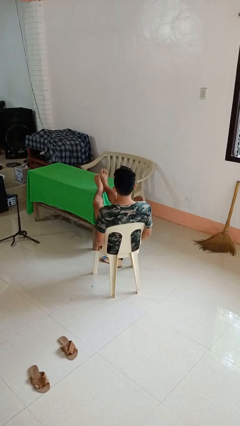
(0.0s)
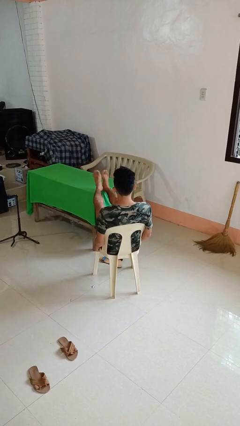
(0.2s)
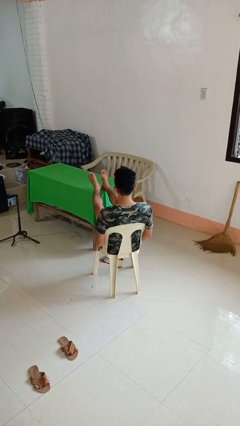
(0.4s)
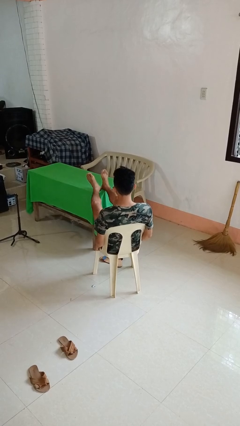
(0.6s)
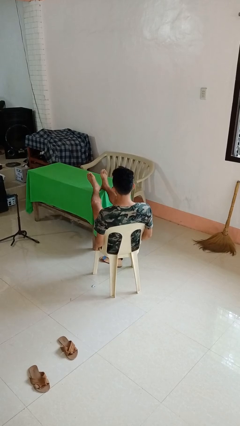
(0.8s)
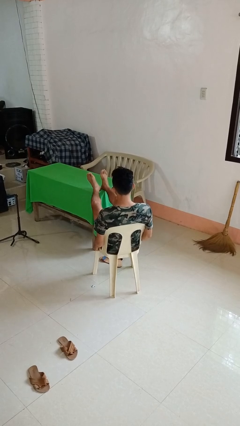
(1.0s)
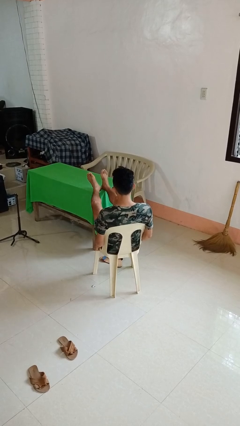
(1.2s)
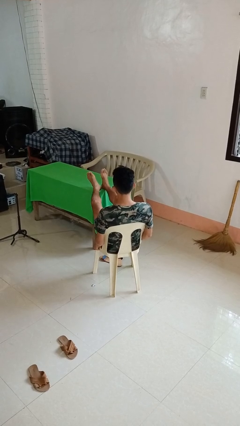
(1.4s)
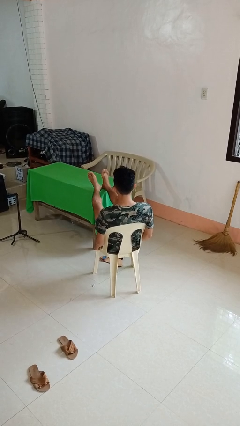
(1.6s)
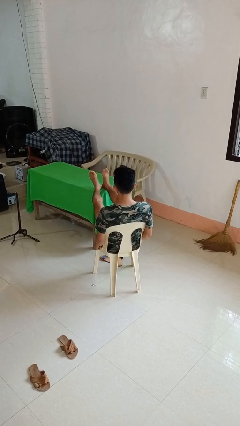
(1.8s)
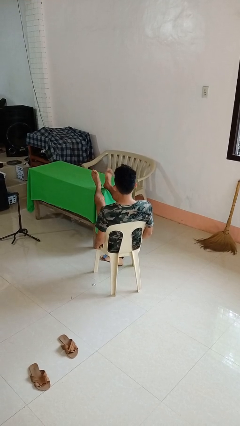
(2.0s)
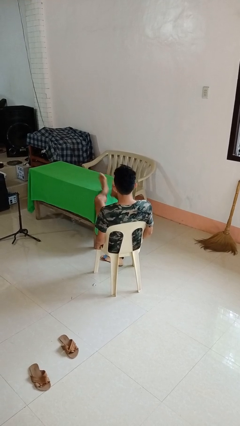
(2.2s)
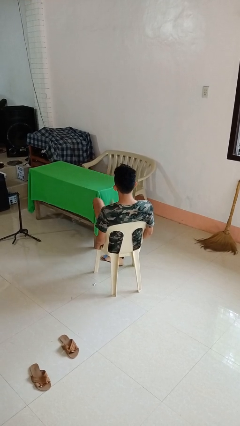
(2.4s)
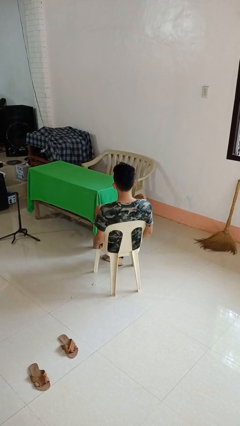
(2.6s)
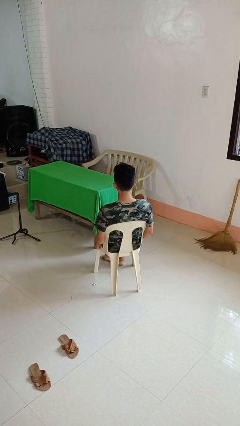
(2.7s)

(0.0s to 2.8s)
person puts feet up

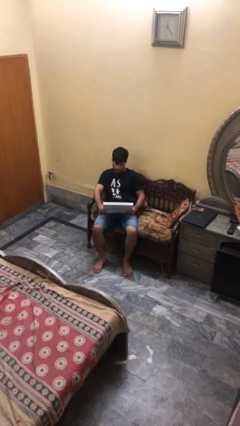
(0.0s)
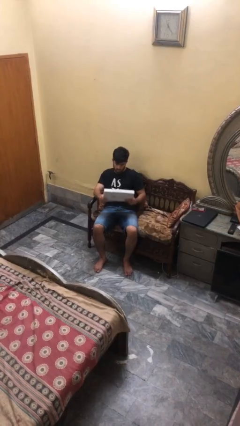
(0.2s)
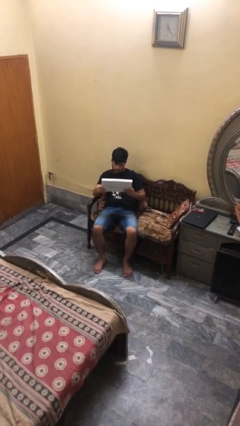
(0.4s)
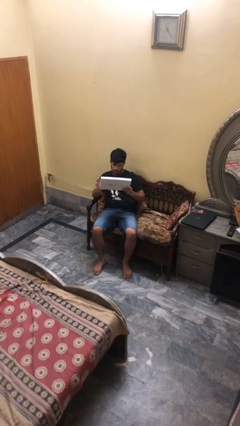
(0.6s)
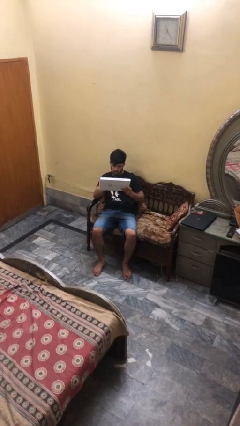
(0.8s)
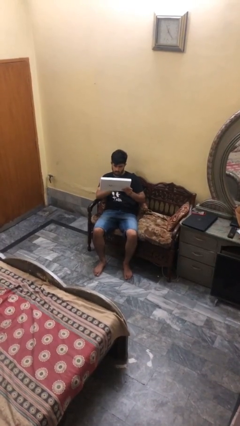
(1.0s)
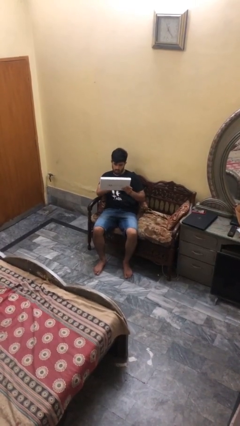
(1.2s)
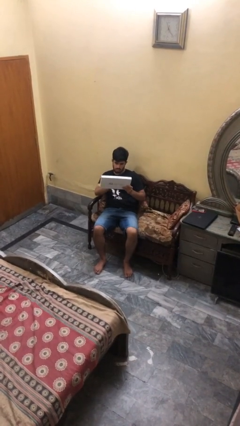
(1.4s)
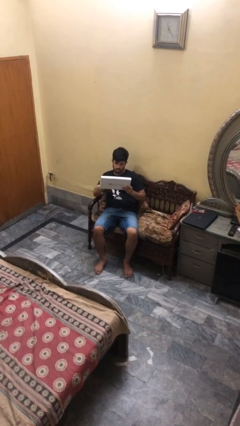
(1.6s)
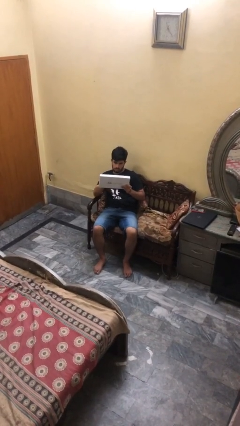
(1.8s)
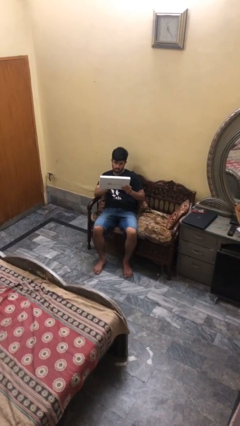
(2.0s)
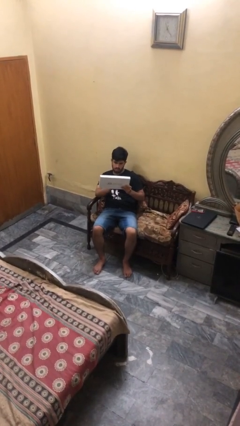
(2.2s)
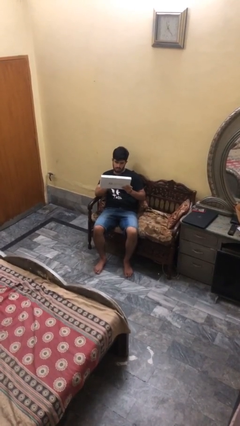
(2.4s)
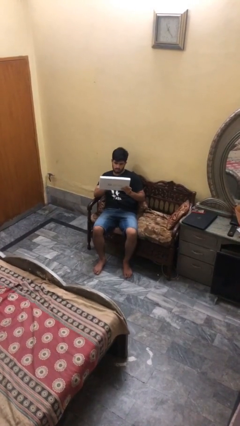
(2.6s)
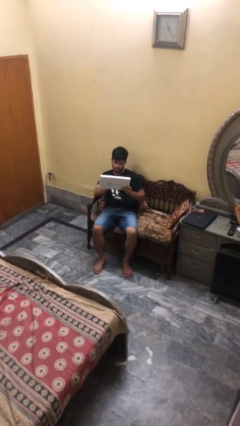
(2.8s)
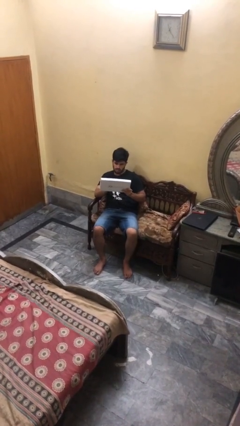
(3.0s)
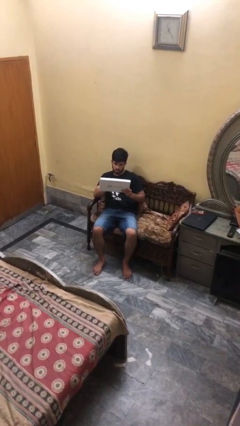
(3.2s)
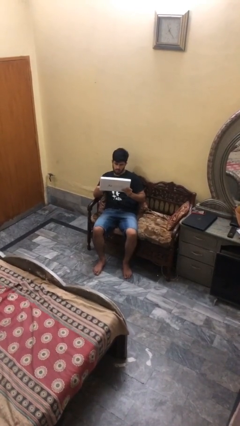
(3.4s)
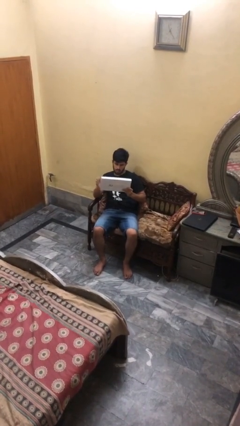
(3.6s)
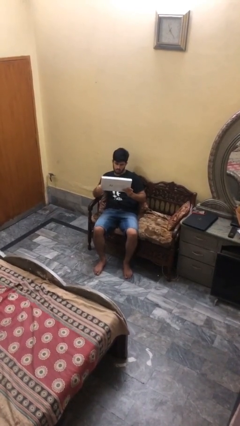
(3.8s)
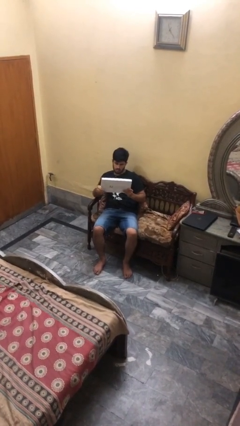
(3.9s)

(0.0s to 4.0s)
person interacts with tablet

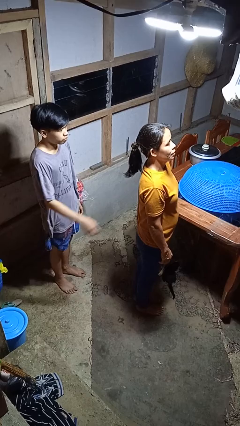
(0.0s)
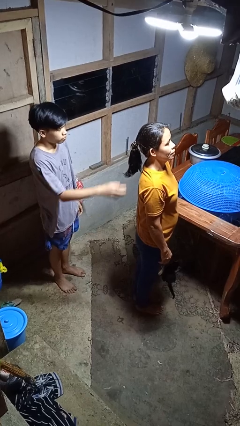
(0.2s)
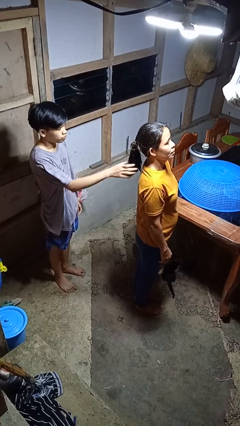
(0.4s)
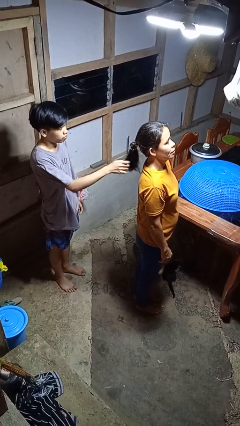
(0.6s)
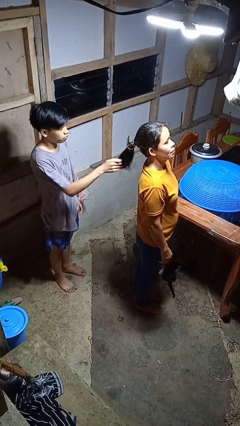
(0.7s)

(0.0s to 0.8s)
person grabs person by hair

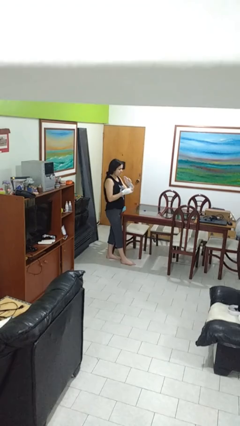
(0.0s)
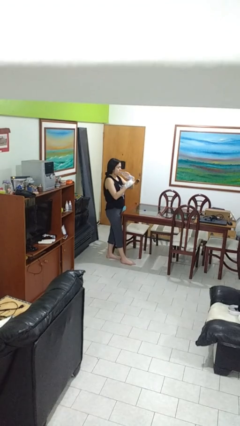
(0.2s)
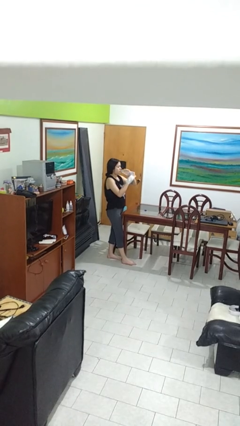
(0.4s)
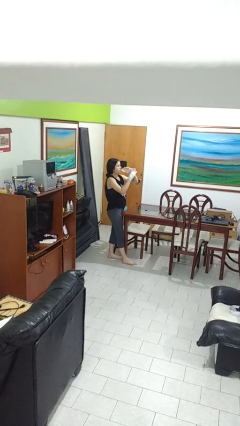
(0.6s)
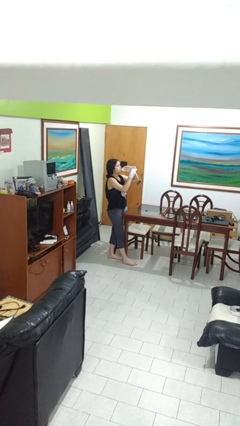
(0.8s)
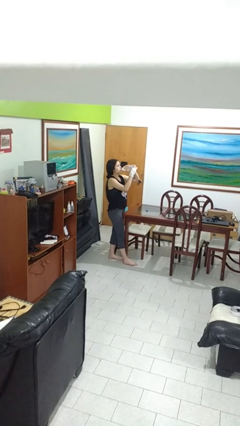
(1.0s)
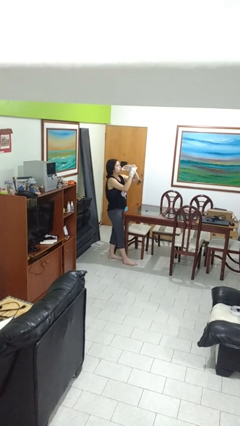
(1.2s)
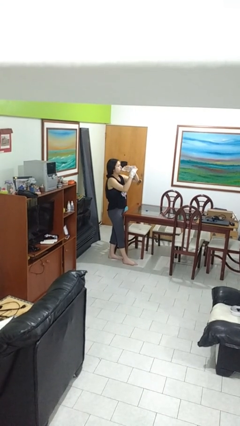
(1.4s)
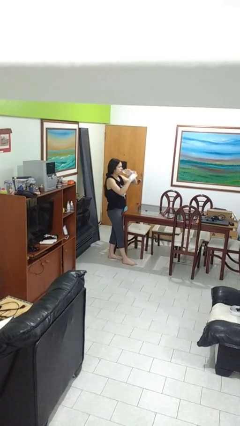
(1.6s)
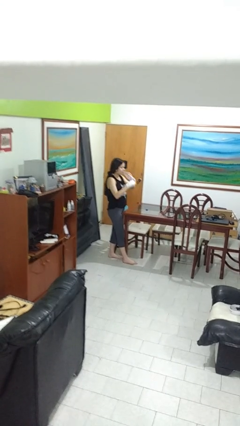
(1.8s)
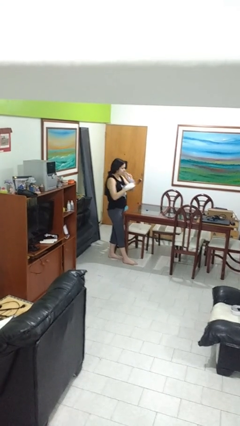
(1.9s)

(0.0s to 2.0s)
person drinks from bottle

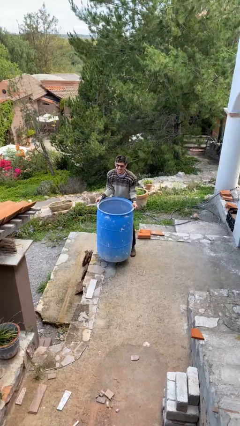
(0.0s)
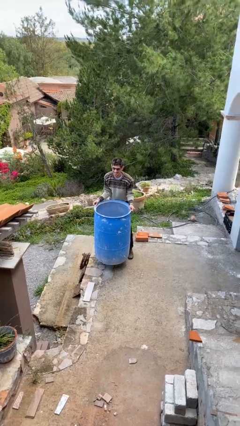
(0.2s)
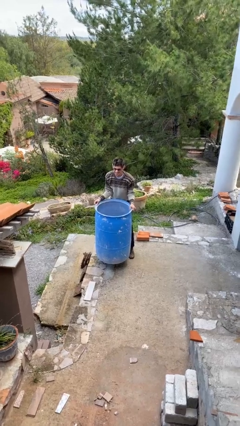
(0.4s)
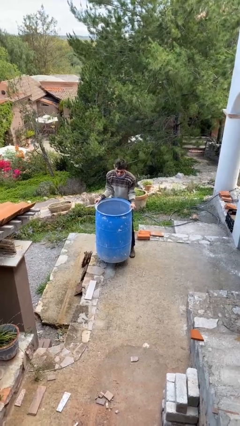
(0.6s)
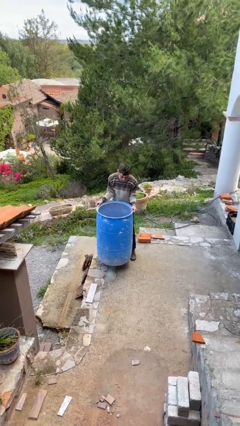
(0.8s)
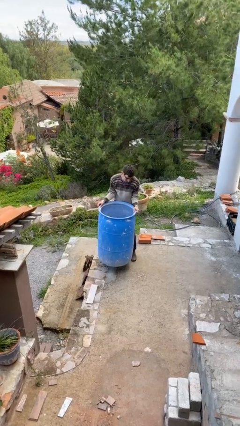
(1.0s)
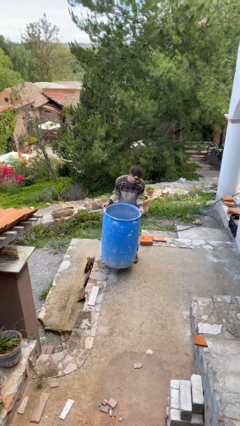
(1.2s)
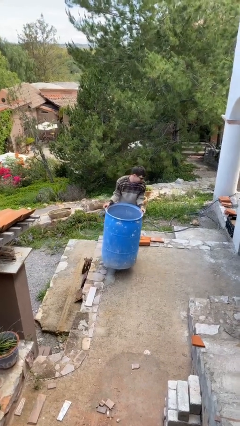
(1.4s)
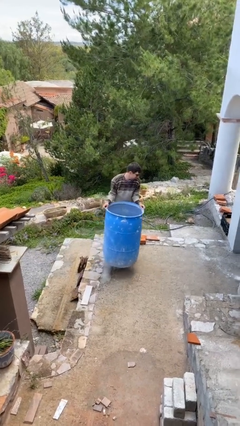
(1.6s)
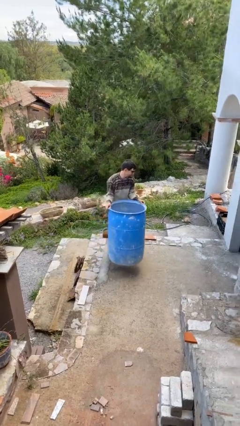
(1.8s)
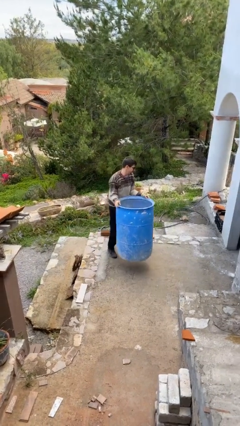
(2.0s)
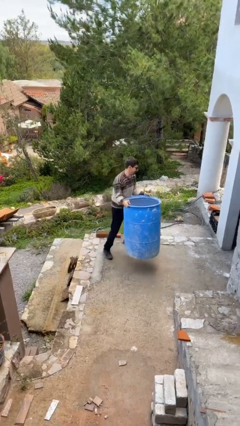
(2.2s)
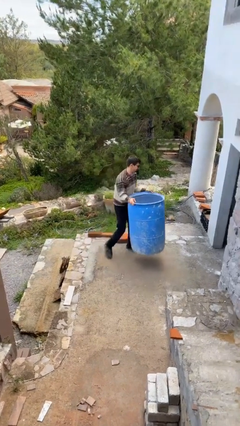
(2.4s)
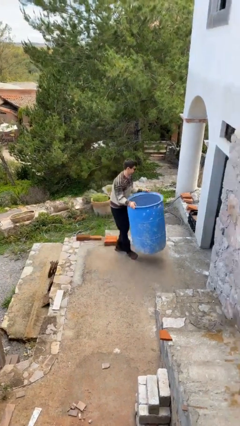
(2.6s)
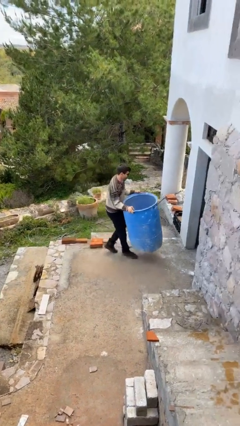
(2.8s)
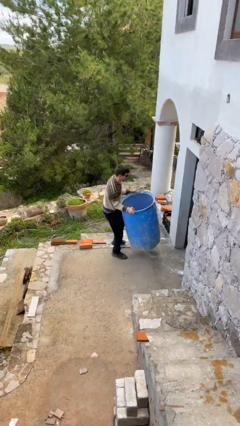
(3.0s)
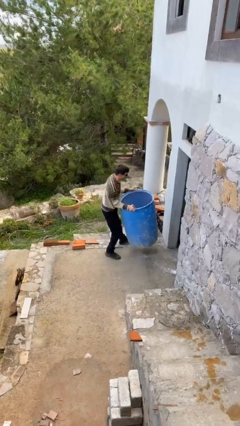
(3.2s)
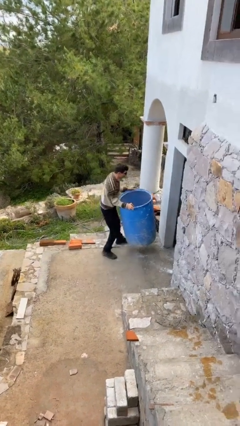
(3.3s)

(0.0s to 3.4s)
person carries heavy object

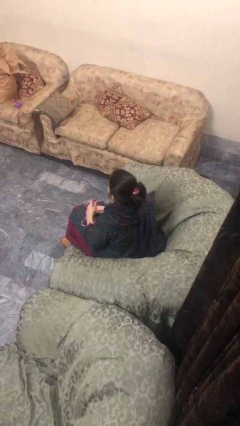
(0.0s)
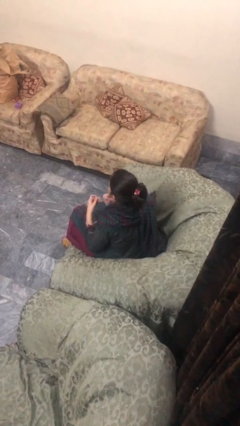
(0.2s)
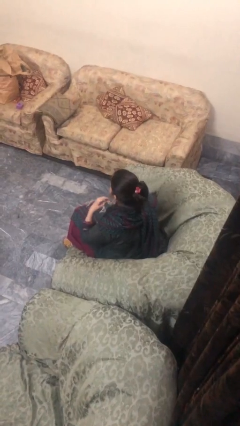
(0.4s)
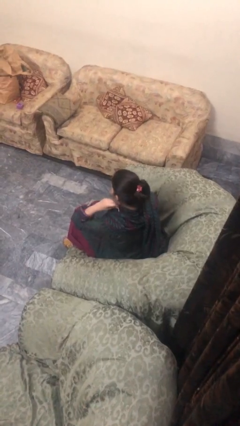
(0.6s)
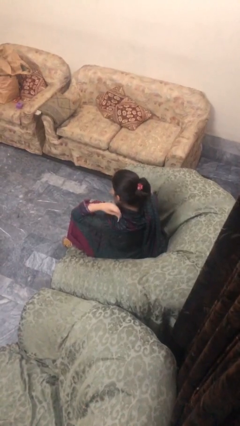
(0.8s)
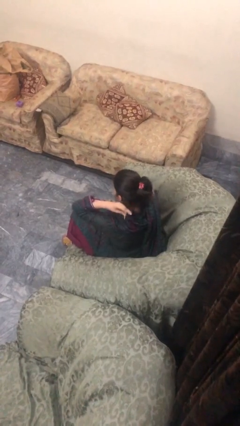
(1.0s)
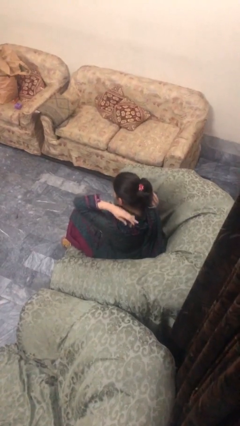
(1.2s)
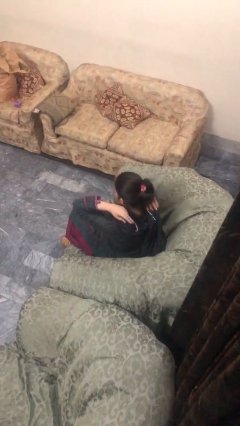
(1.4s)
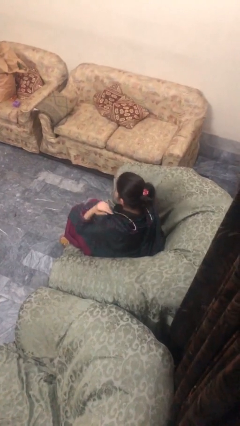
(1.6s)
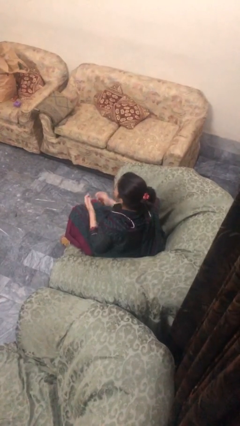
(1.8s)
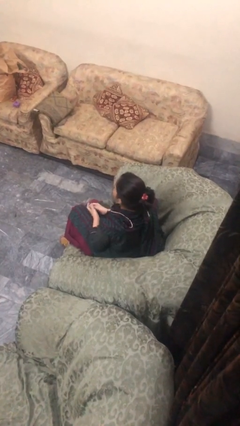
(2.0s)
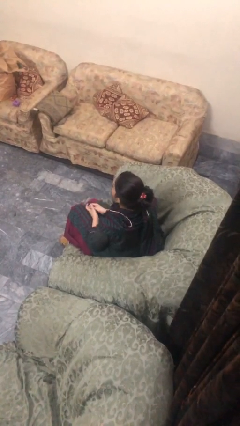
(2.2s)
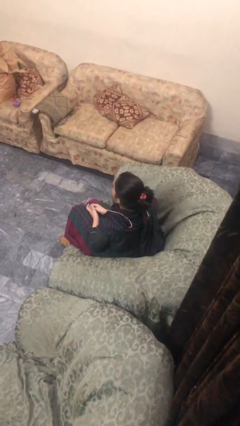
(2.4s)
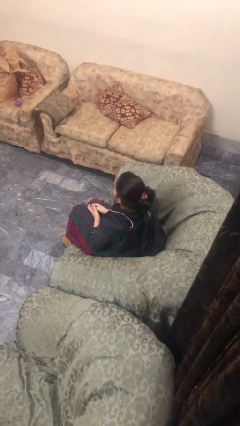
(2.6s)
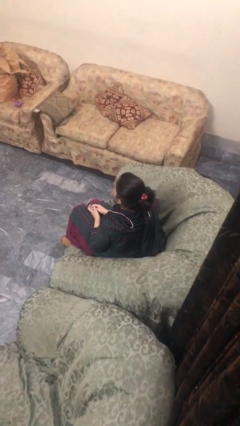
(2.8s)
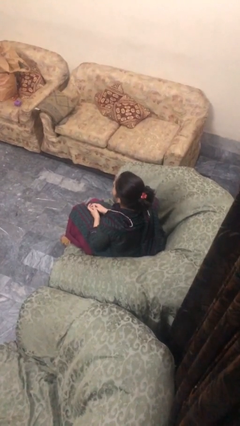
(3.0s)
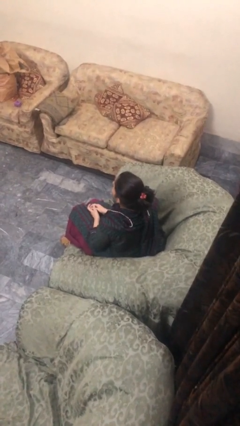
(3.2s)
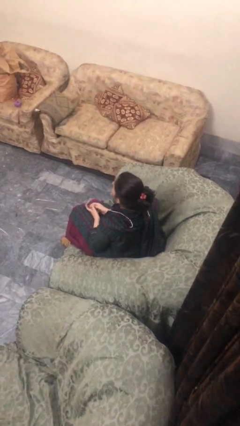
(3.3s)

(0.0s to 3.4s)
person puts on necklace

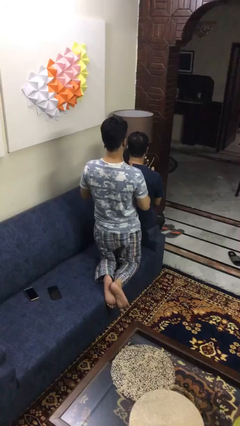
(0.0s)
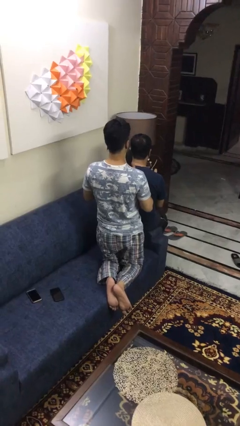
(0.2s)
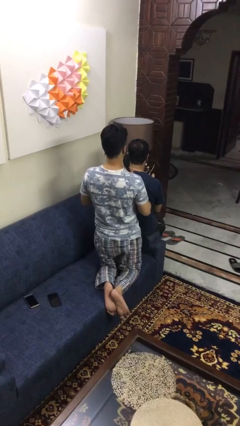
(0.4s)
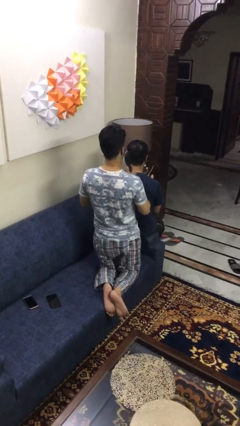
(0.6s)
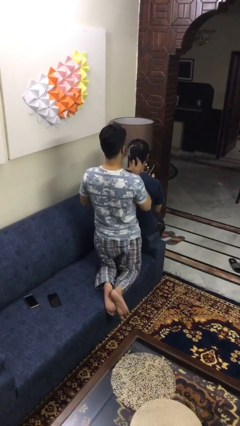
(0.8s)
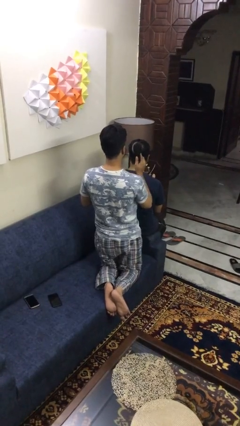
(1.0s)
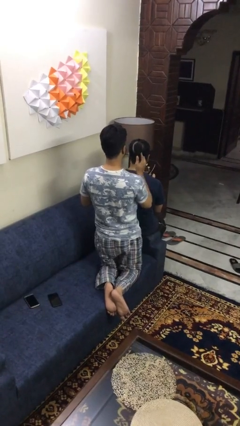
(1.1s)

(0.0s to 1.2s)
person brushes hair of person
